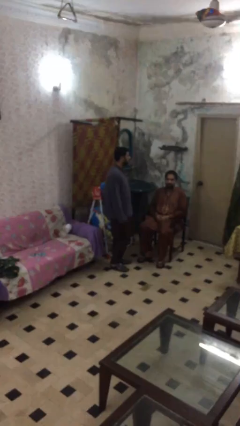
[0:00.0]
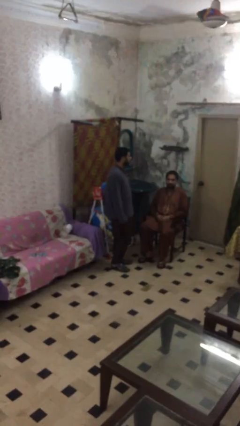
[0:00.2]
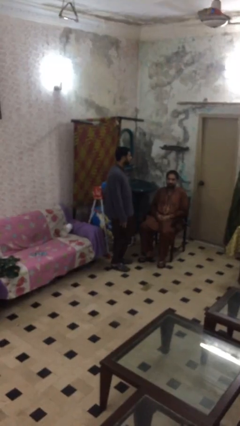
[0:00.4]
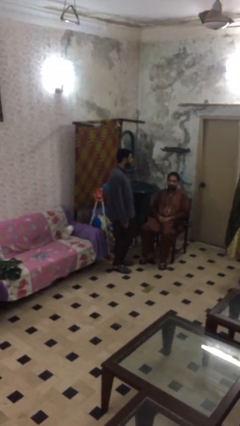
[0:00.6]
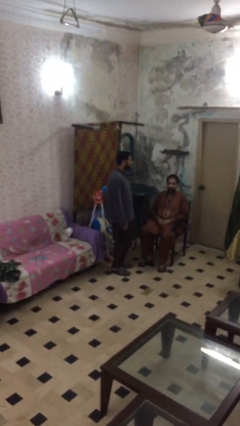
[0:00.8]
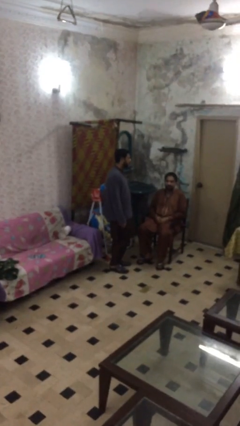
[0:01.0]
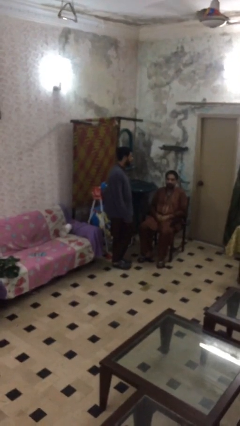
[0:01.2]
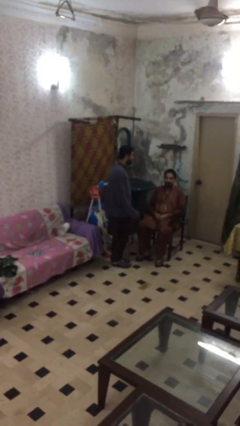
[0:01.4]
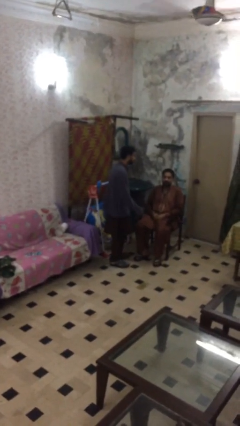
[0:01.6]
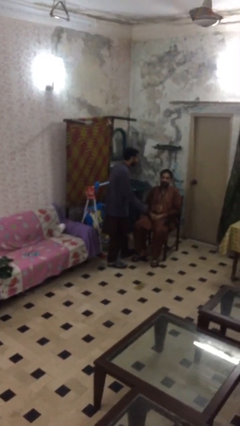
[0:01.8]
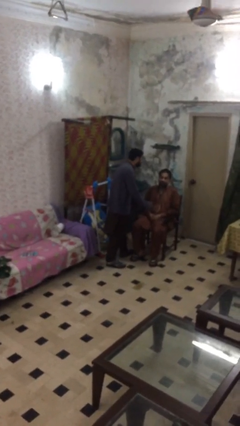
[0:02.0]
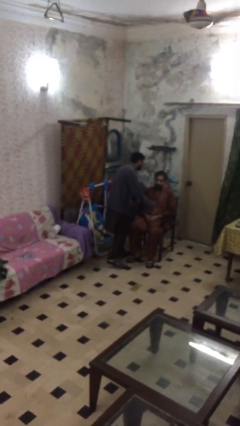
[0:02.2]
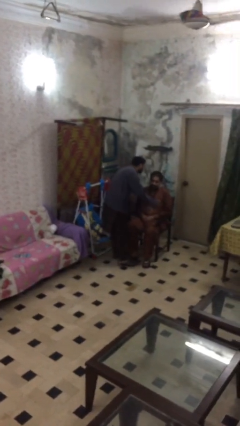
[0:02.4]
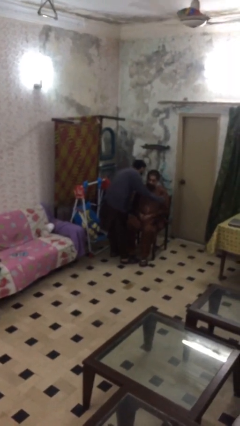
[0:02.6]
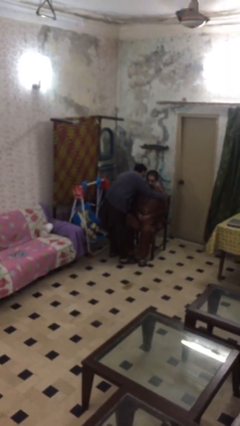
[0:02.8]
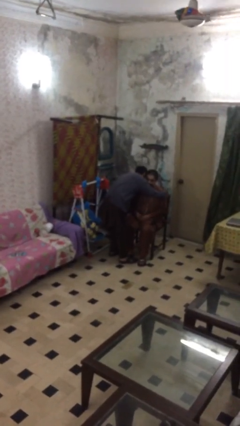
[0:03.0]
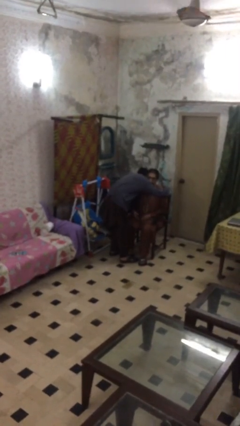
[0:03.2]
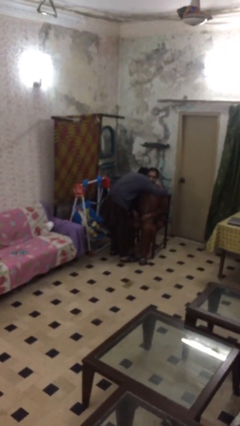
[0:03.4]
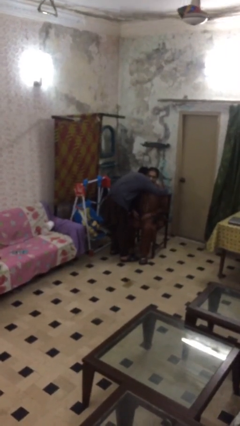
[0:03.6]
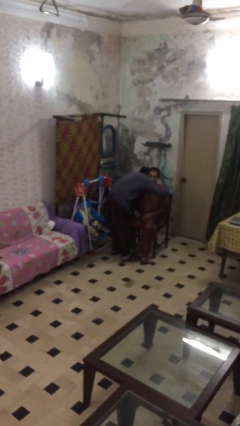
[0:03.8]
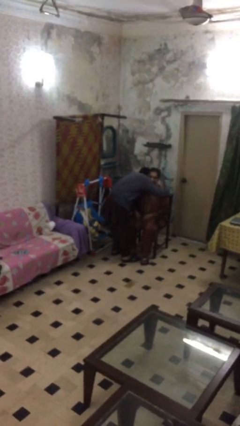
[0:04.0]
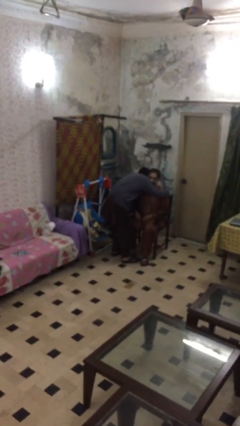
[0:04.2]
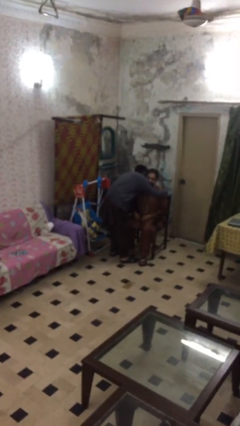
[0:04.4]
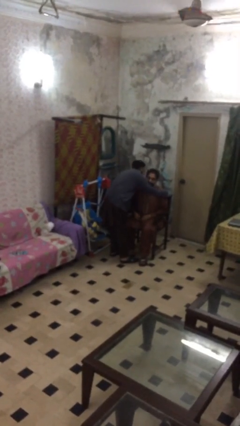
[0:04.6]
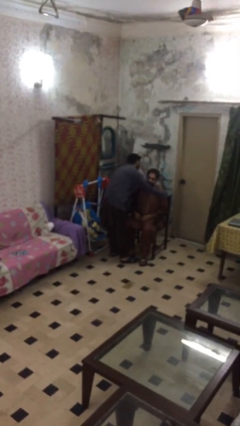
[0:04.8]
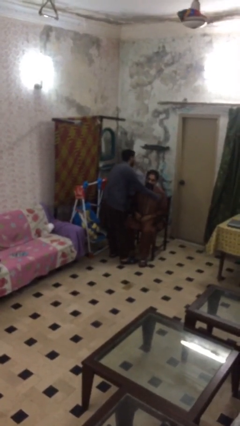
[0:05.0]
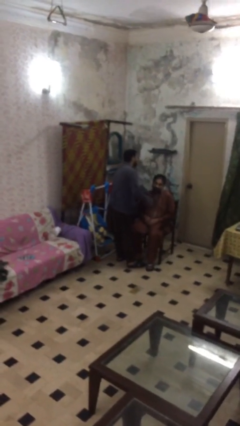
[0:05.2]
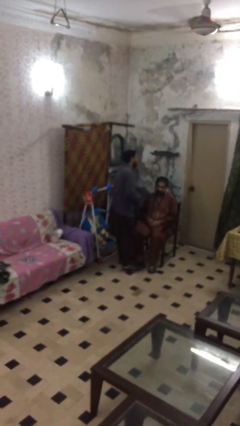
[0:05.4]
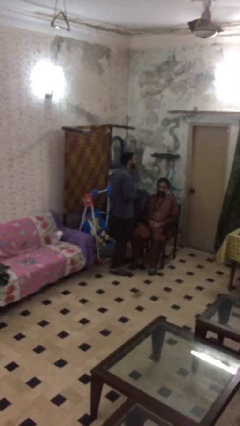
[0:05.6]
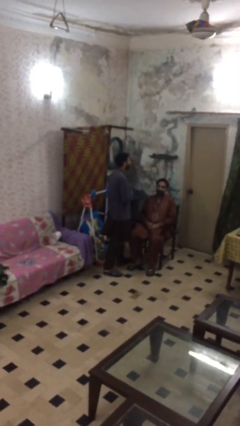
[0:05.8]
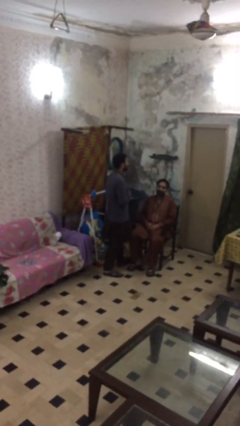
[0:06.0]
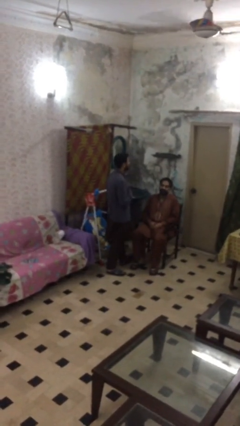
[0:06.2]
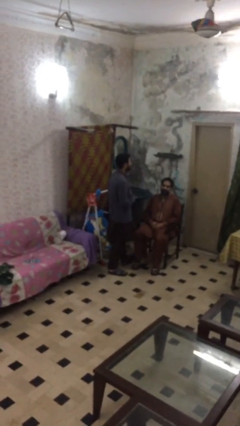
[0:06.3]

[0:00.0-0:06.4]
person embraces person

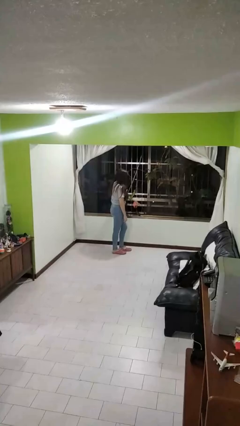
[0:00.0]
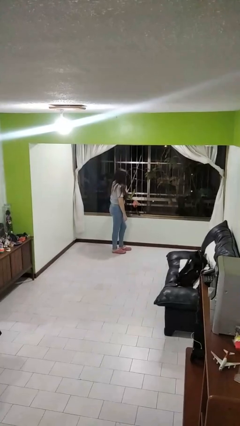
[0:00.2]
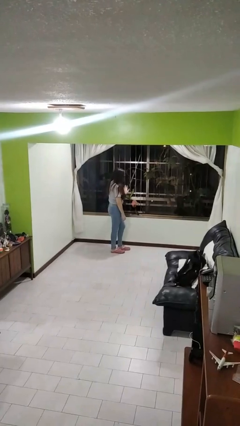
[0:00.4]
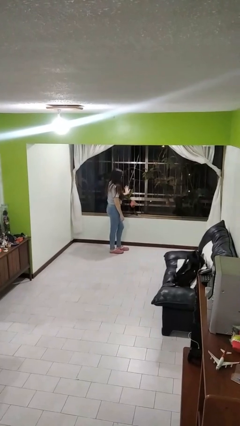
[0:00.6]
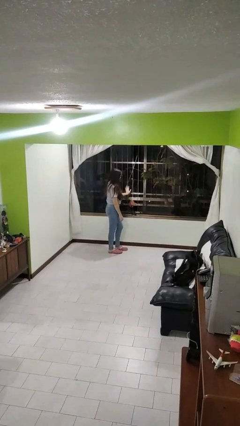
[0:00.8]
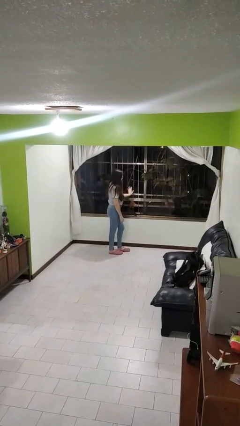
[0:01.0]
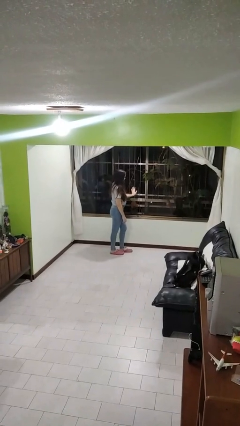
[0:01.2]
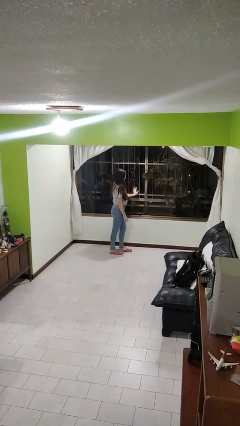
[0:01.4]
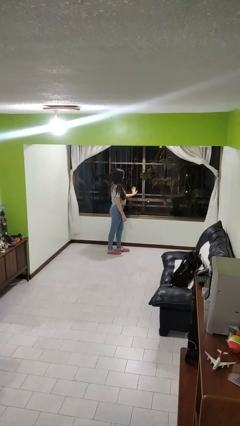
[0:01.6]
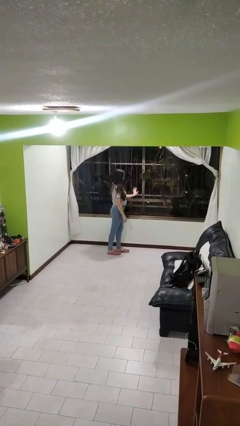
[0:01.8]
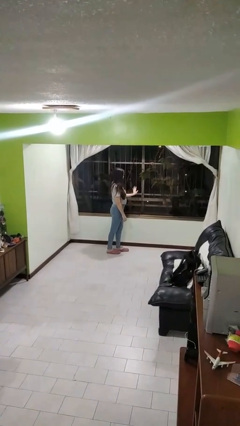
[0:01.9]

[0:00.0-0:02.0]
person closes home window

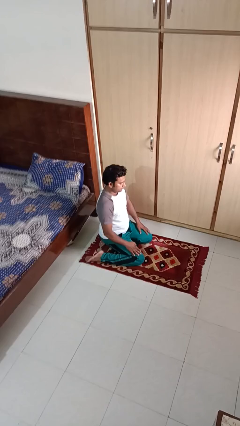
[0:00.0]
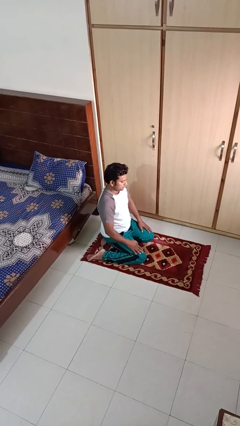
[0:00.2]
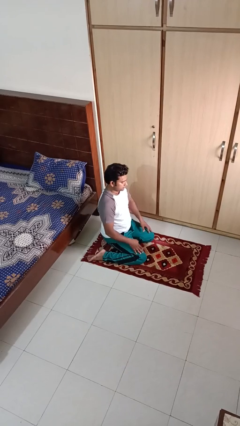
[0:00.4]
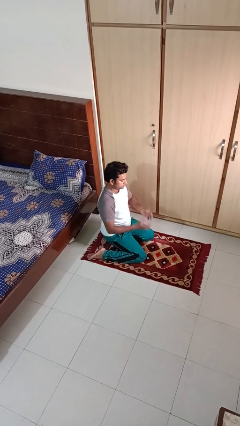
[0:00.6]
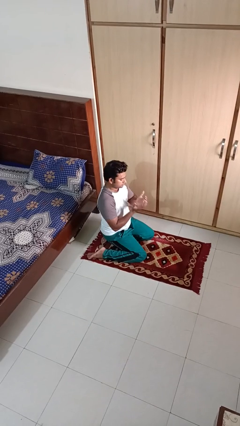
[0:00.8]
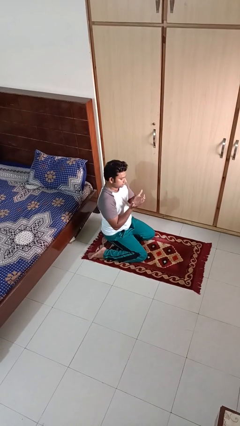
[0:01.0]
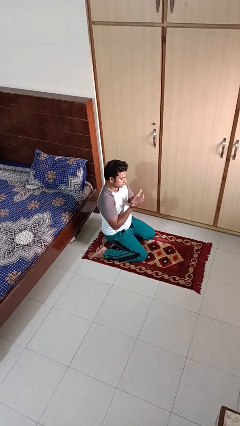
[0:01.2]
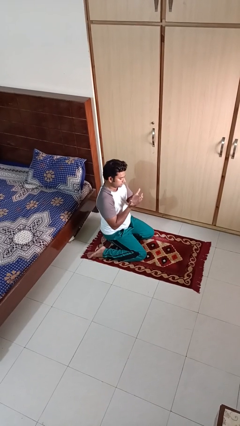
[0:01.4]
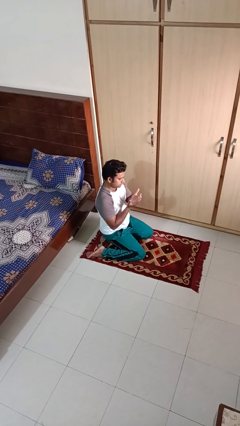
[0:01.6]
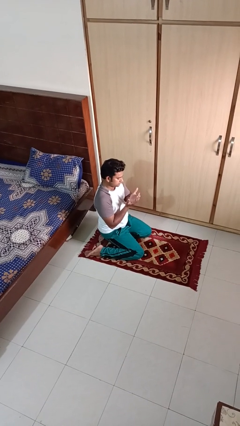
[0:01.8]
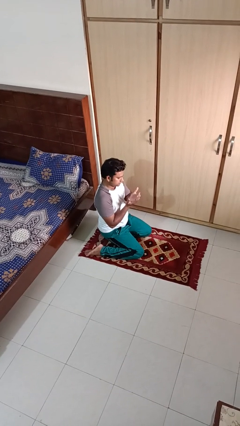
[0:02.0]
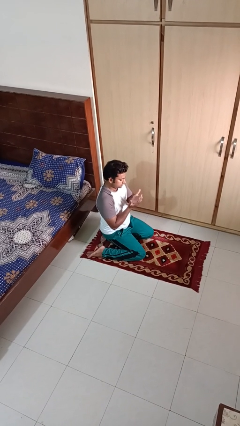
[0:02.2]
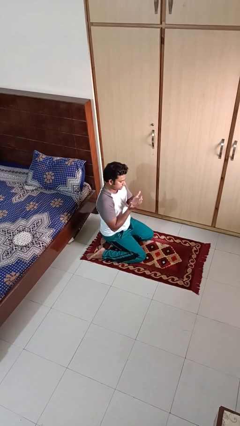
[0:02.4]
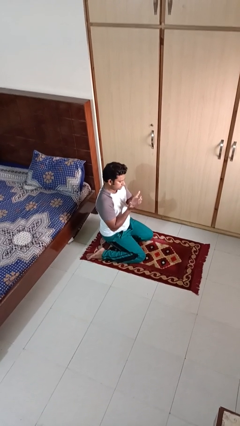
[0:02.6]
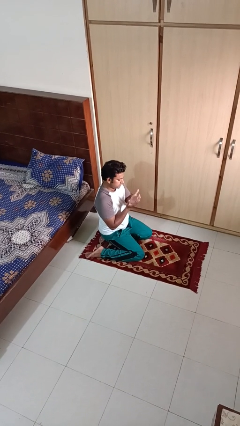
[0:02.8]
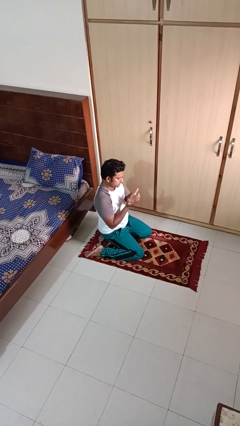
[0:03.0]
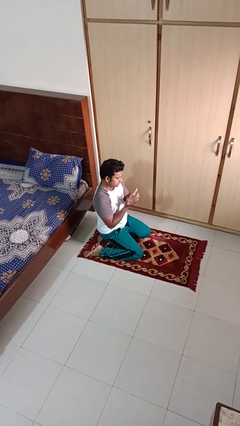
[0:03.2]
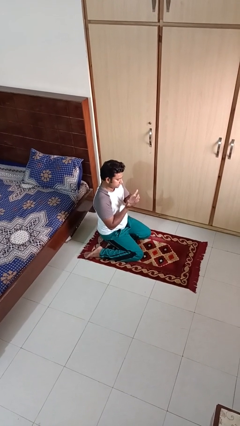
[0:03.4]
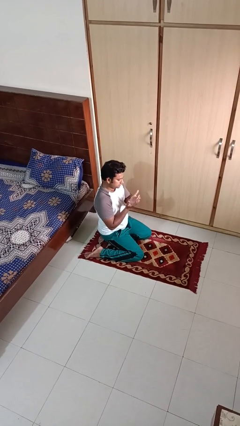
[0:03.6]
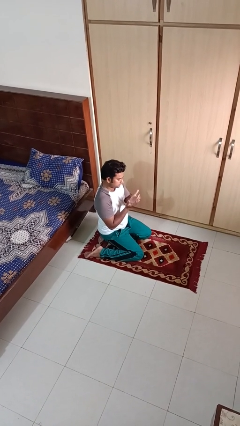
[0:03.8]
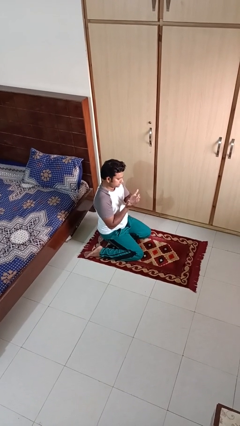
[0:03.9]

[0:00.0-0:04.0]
person prays

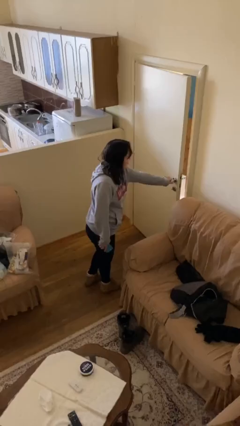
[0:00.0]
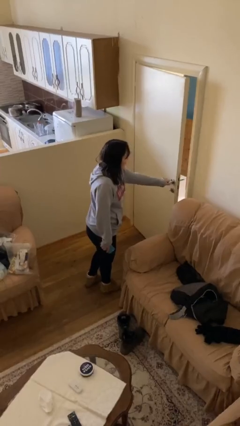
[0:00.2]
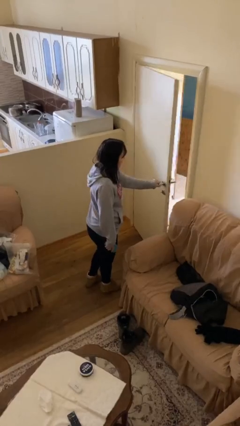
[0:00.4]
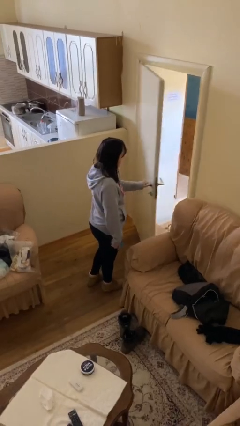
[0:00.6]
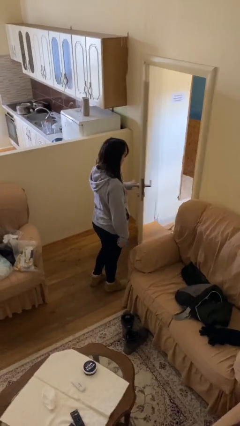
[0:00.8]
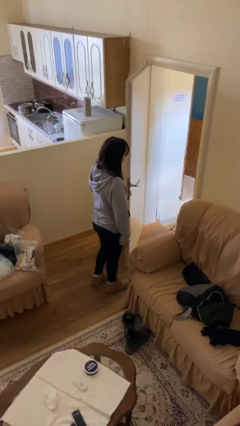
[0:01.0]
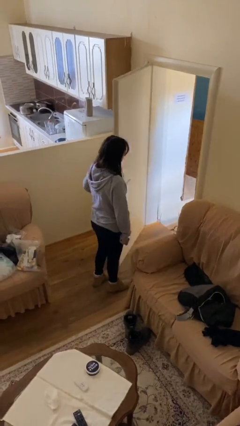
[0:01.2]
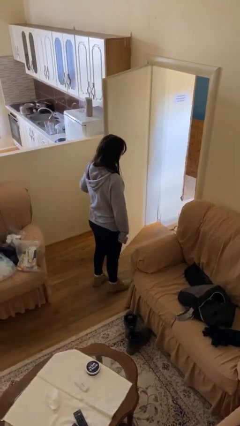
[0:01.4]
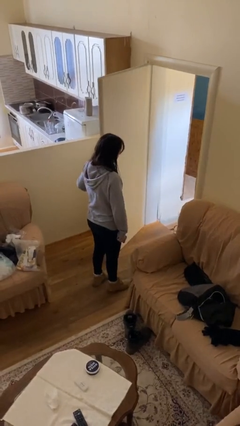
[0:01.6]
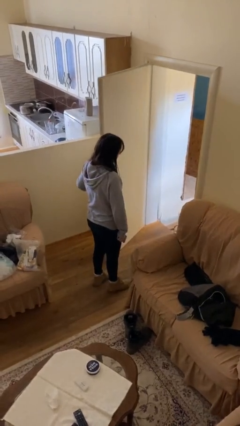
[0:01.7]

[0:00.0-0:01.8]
person opens facility door

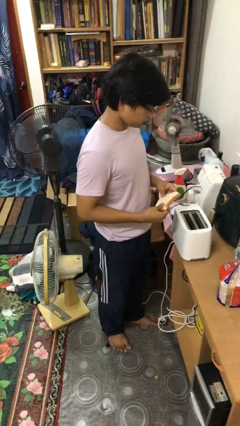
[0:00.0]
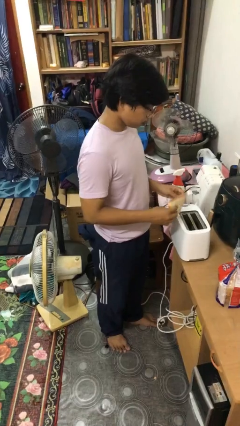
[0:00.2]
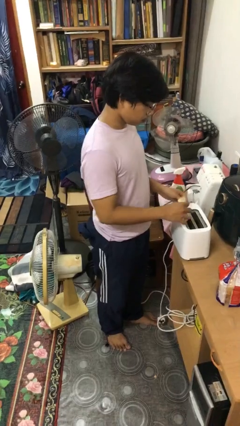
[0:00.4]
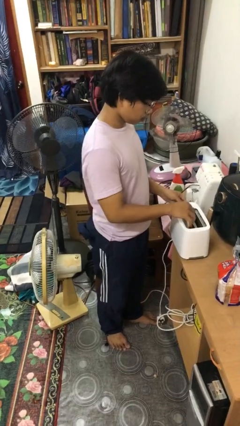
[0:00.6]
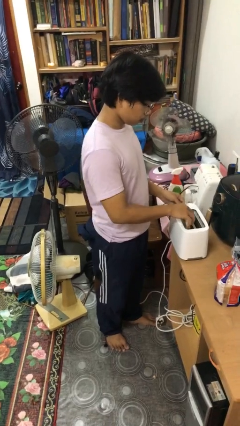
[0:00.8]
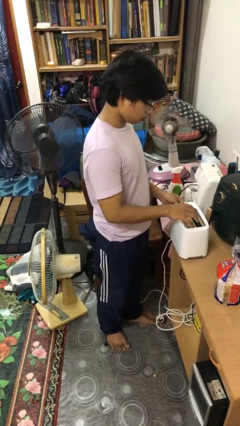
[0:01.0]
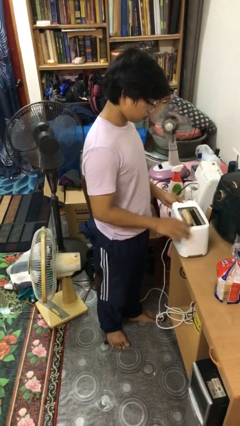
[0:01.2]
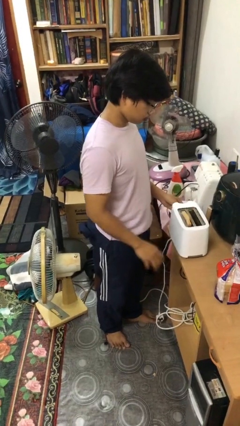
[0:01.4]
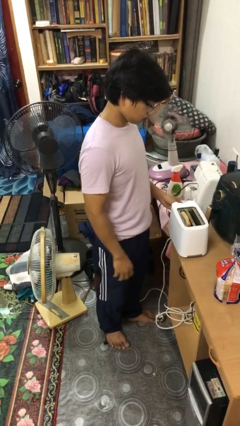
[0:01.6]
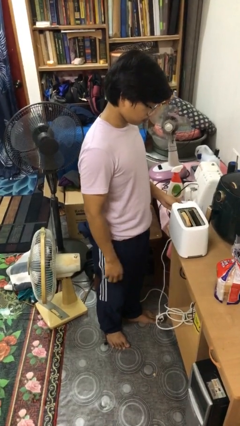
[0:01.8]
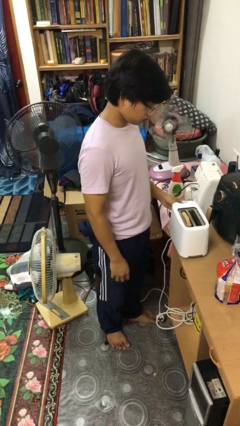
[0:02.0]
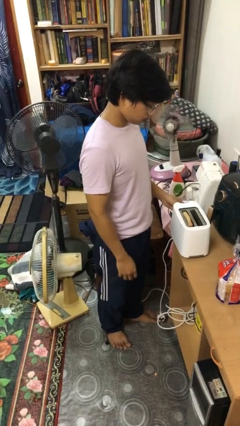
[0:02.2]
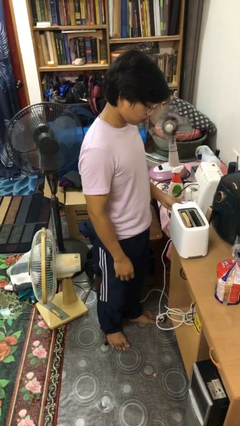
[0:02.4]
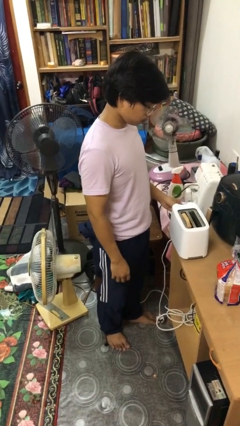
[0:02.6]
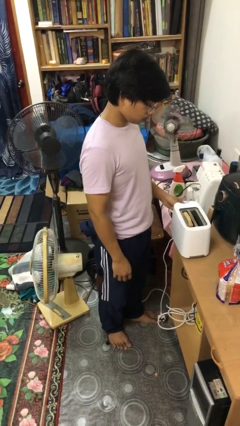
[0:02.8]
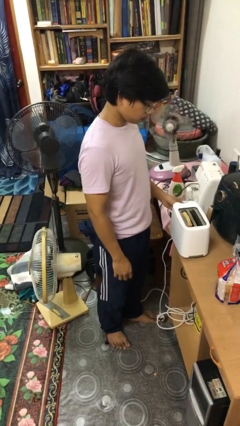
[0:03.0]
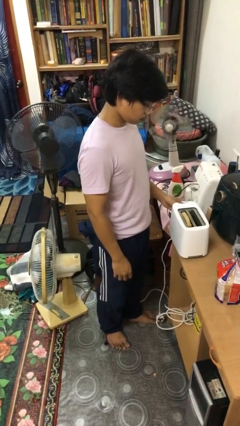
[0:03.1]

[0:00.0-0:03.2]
person puts object into toaster
